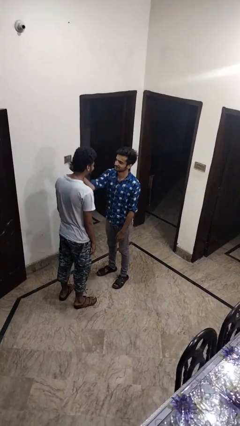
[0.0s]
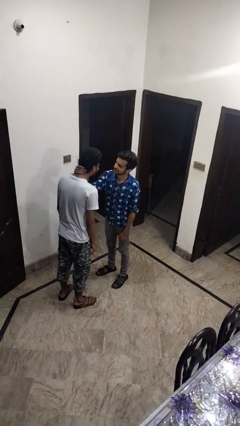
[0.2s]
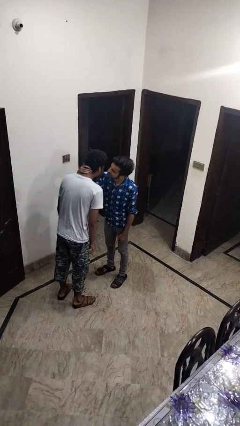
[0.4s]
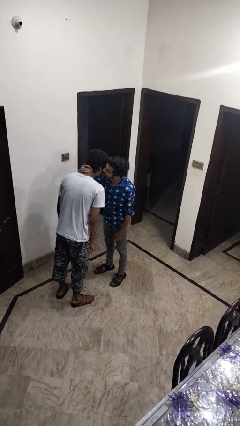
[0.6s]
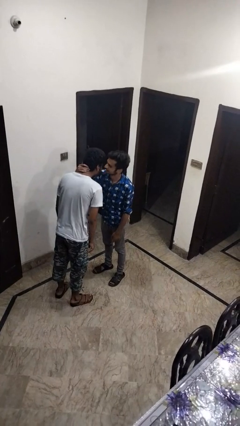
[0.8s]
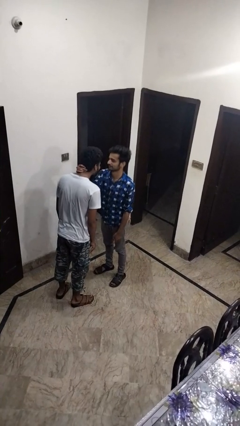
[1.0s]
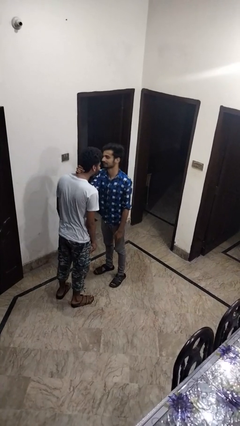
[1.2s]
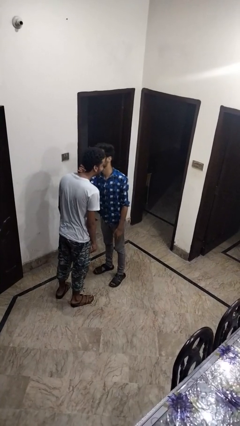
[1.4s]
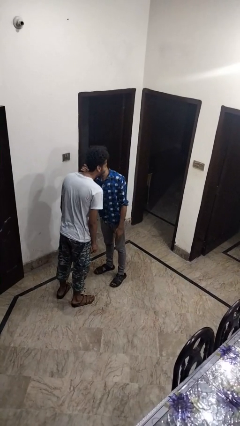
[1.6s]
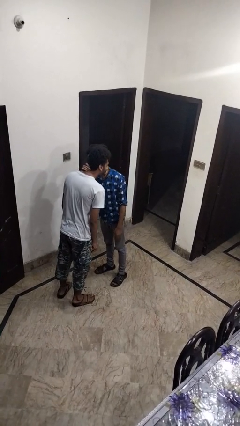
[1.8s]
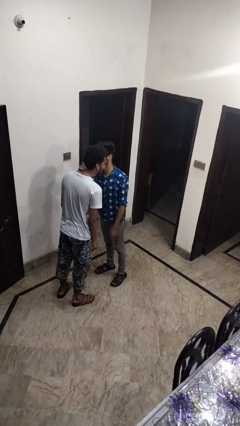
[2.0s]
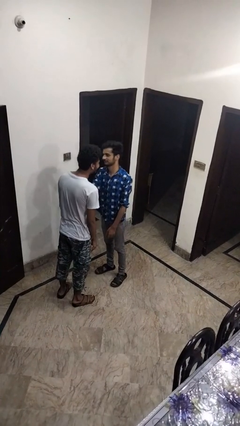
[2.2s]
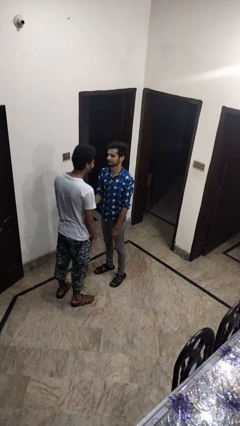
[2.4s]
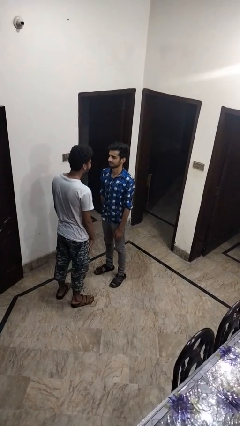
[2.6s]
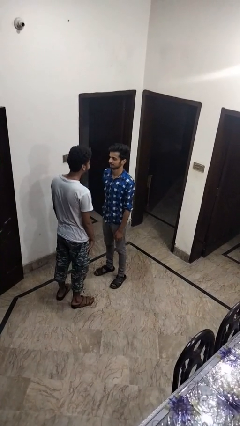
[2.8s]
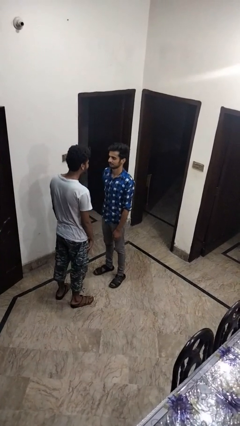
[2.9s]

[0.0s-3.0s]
person kisses cheek of person

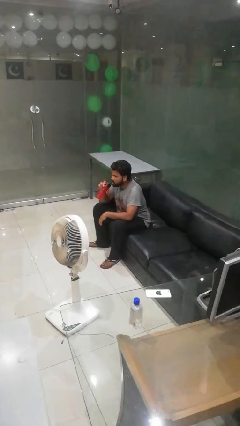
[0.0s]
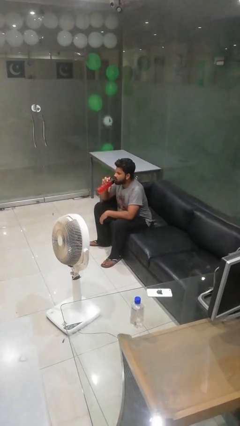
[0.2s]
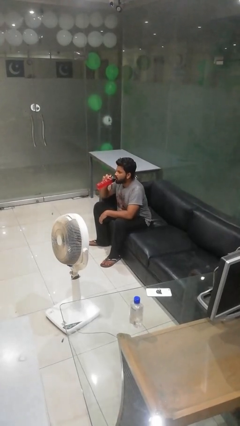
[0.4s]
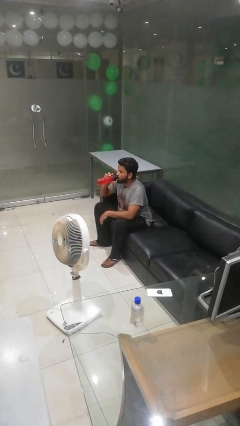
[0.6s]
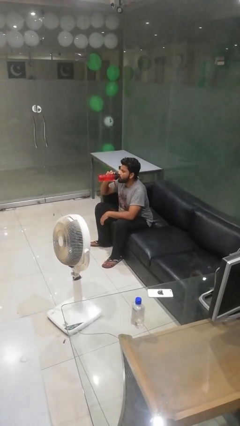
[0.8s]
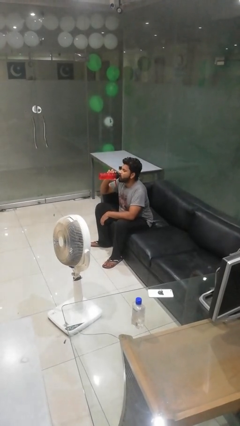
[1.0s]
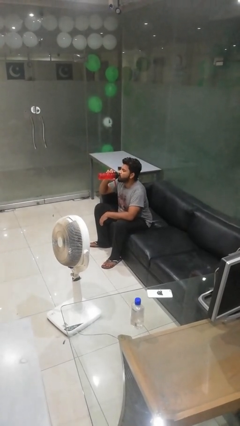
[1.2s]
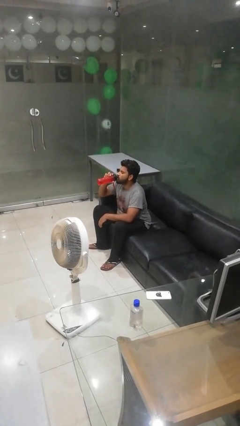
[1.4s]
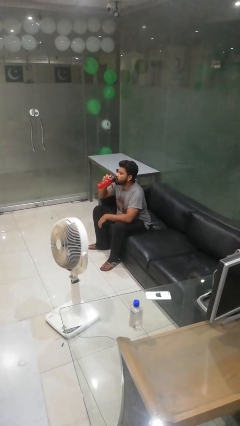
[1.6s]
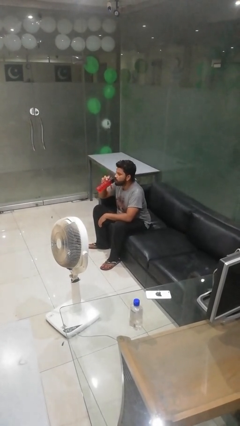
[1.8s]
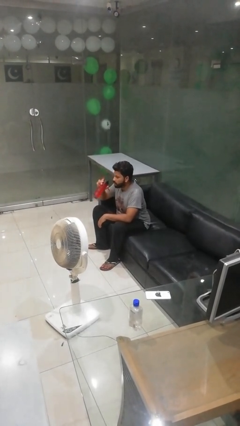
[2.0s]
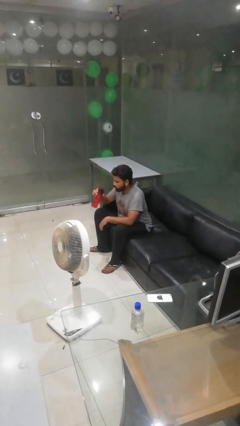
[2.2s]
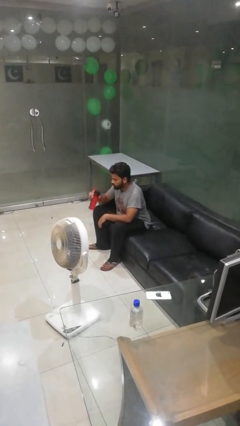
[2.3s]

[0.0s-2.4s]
person drinks from bottle

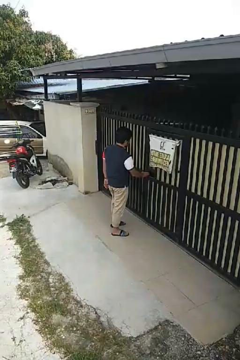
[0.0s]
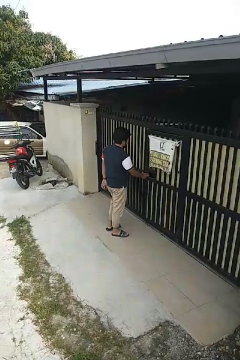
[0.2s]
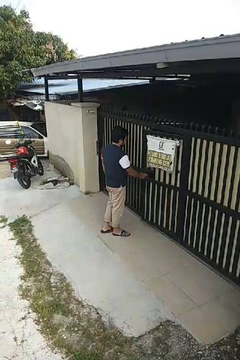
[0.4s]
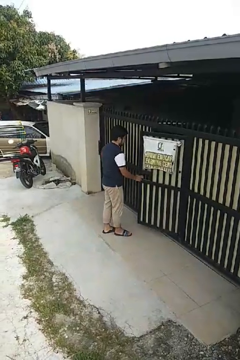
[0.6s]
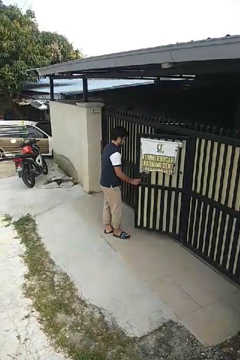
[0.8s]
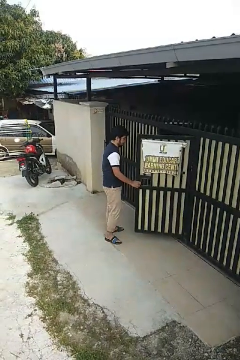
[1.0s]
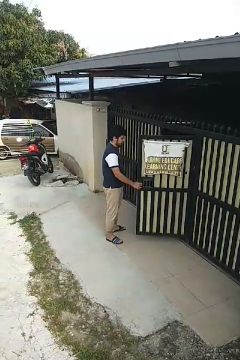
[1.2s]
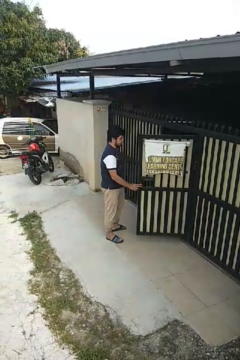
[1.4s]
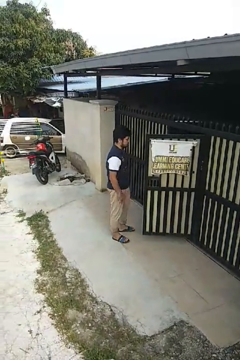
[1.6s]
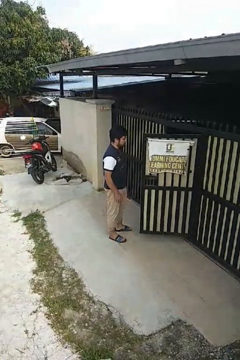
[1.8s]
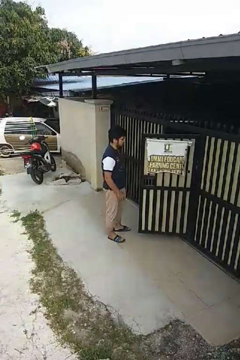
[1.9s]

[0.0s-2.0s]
person opens gate

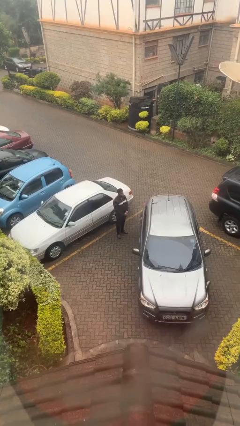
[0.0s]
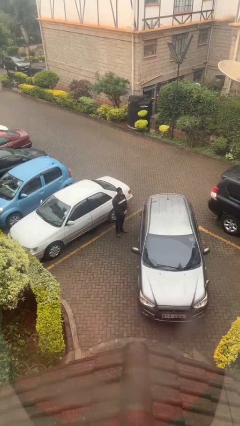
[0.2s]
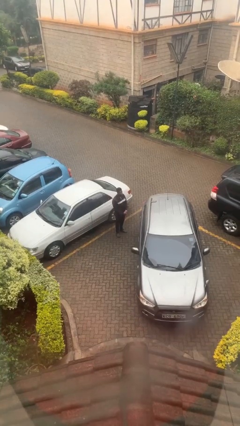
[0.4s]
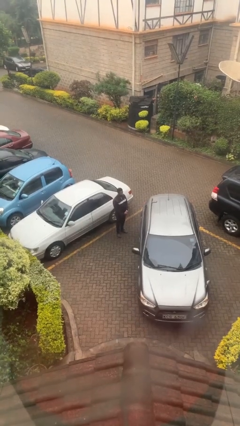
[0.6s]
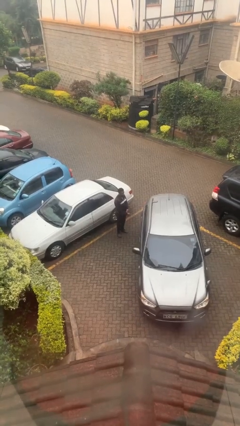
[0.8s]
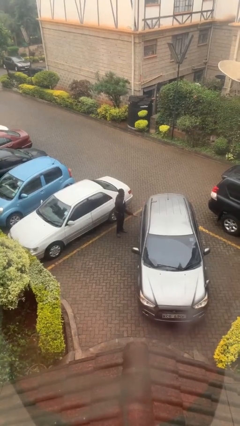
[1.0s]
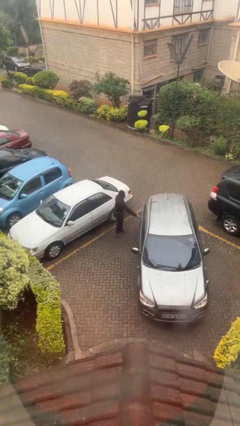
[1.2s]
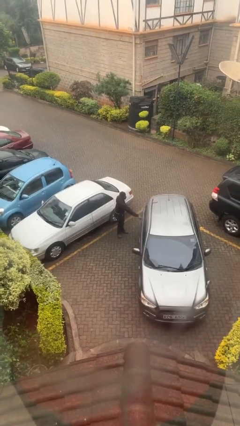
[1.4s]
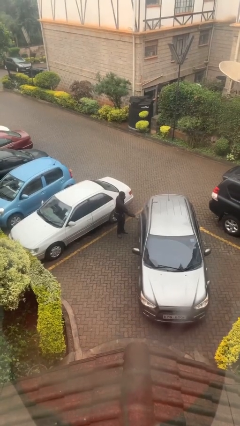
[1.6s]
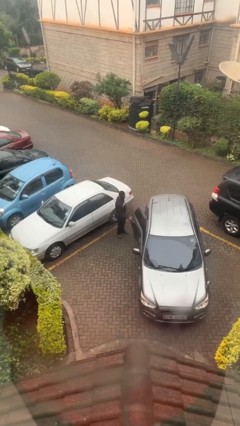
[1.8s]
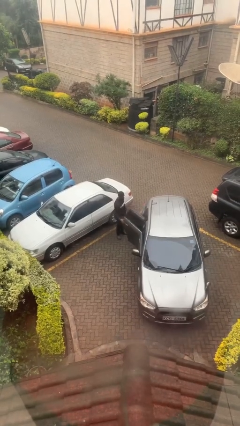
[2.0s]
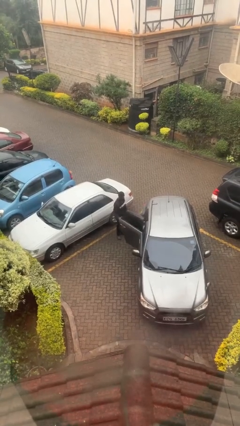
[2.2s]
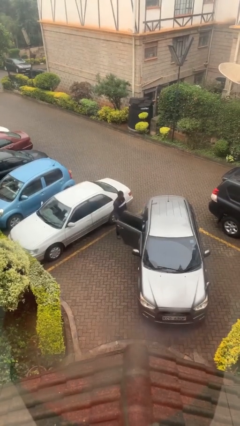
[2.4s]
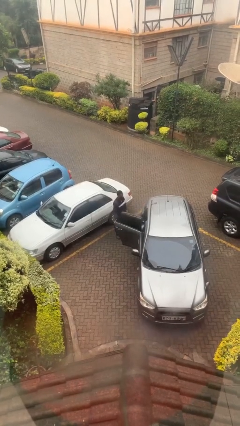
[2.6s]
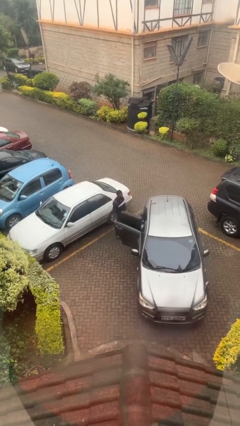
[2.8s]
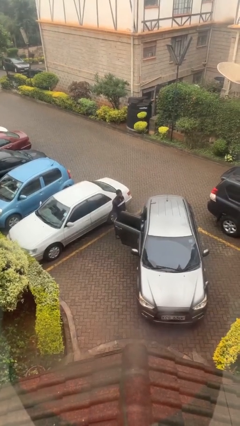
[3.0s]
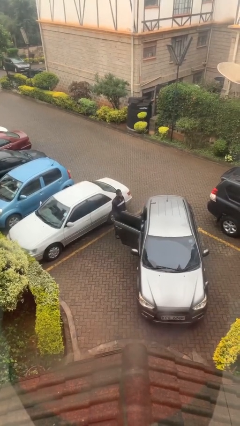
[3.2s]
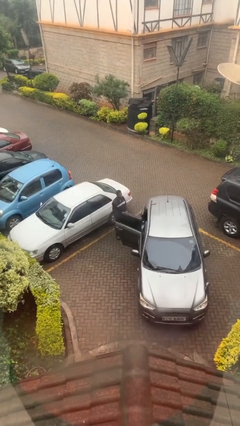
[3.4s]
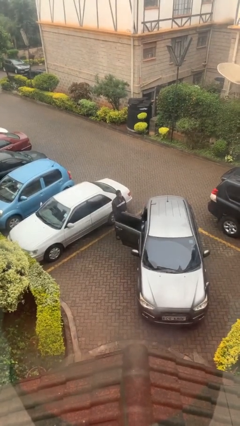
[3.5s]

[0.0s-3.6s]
person opens car door

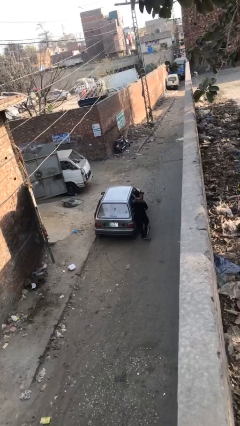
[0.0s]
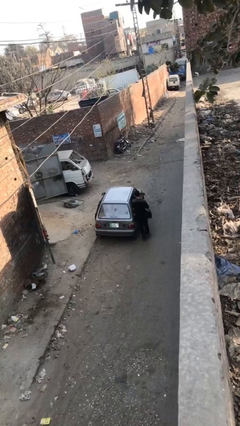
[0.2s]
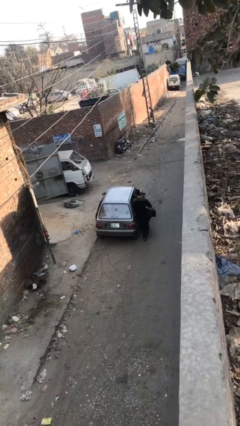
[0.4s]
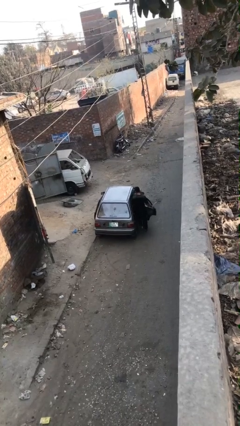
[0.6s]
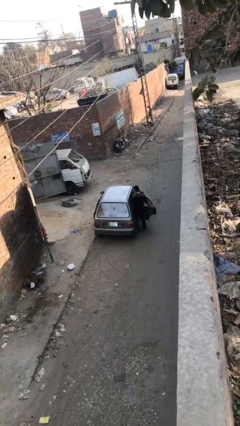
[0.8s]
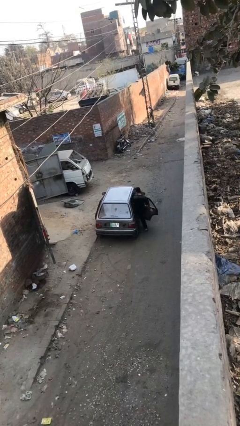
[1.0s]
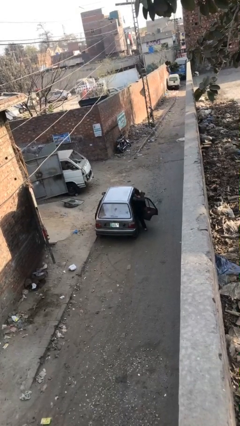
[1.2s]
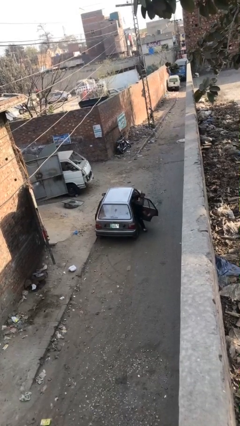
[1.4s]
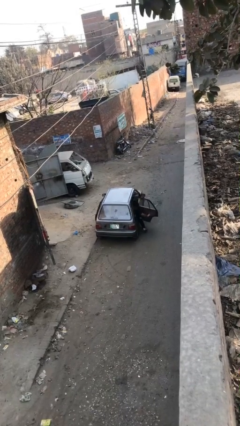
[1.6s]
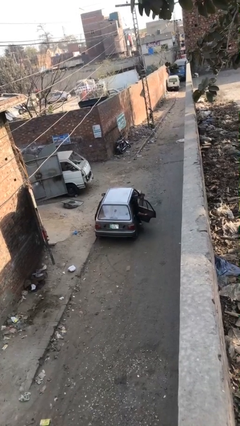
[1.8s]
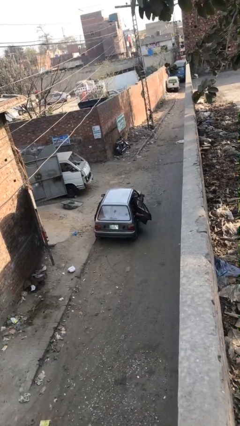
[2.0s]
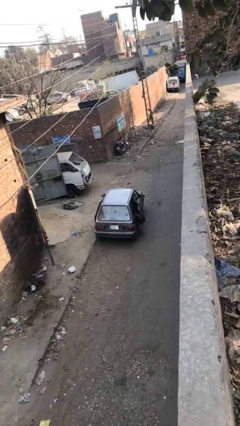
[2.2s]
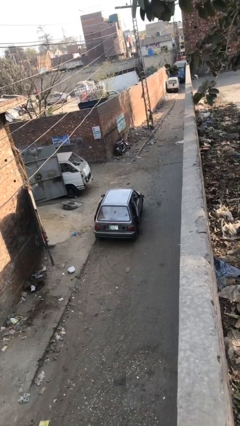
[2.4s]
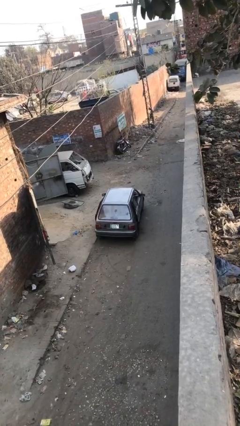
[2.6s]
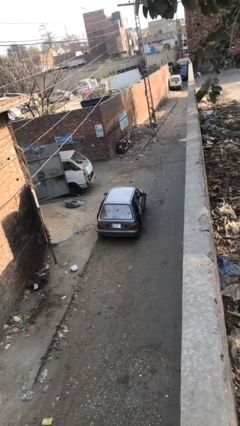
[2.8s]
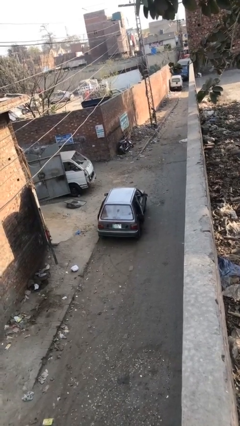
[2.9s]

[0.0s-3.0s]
car picks up person

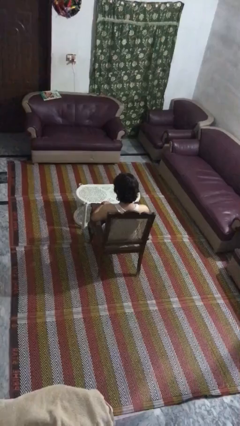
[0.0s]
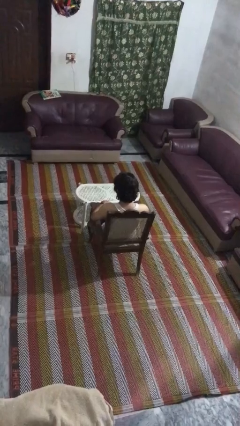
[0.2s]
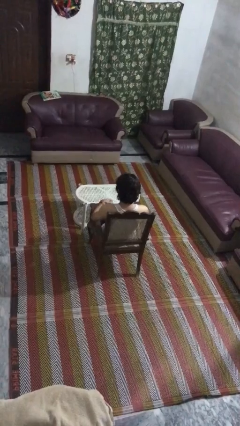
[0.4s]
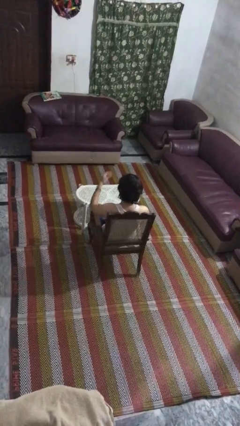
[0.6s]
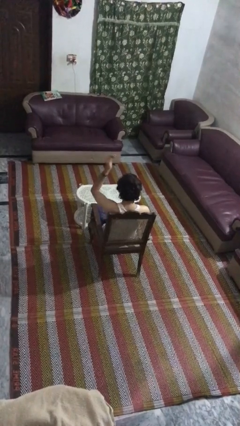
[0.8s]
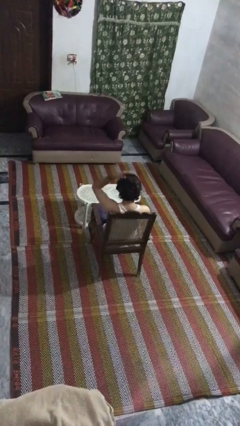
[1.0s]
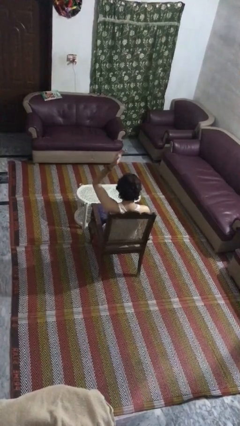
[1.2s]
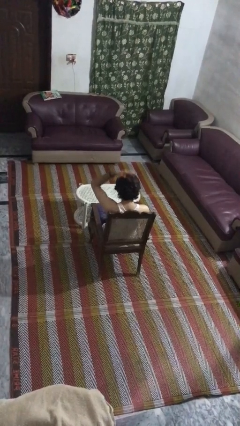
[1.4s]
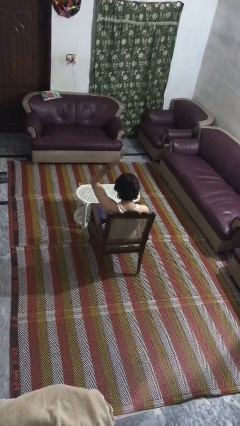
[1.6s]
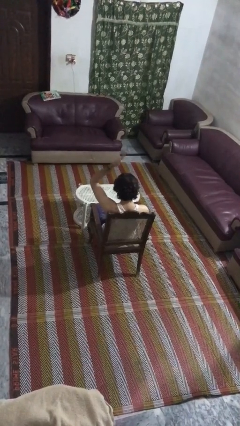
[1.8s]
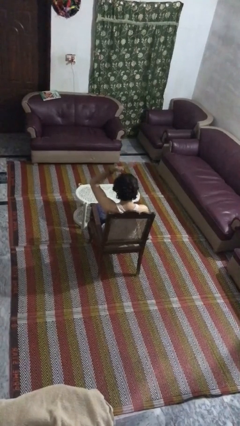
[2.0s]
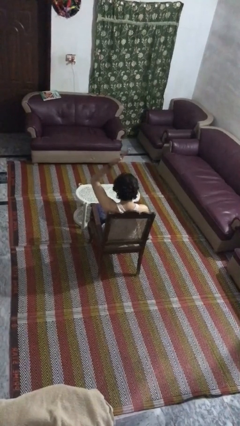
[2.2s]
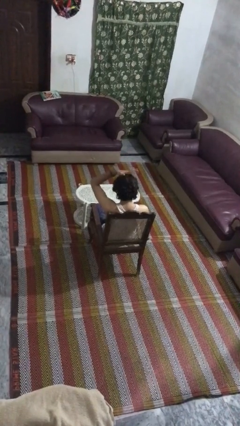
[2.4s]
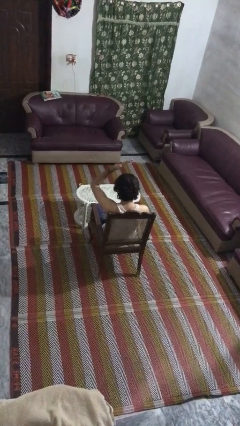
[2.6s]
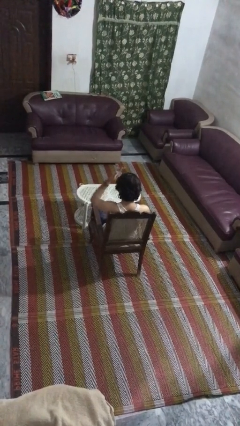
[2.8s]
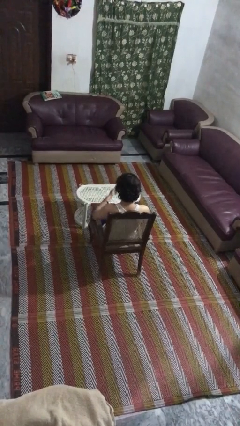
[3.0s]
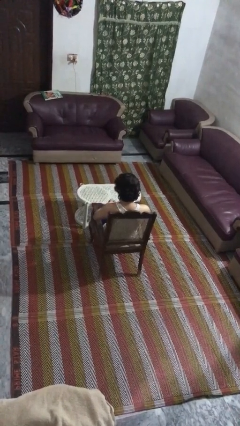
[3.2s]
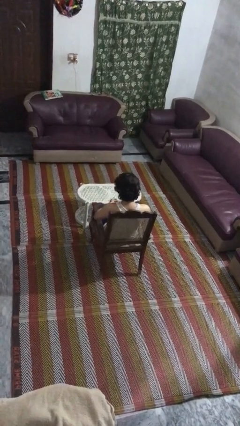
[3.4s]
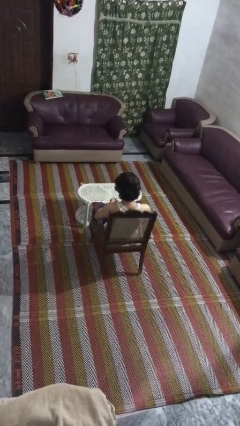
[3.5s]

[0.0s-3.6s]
person pats head

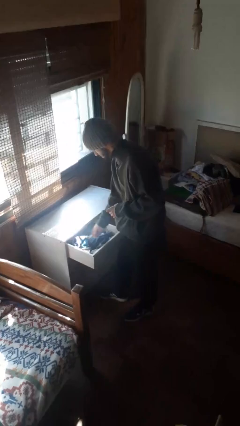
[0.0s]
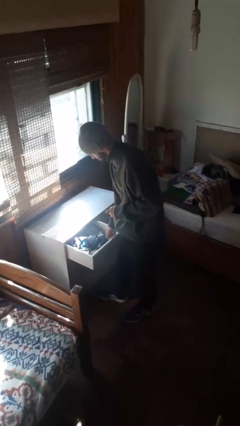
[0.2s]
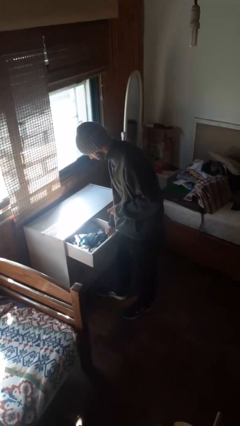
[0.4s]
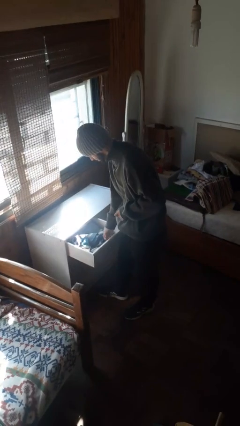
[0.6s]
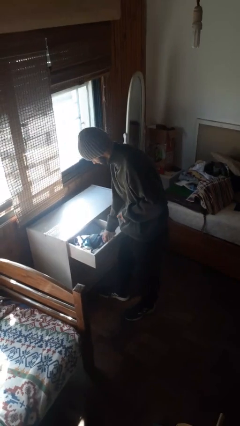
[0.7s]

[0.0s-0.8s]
person puts clothes into dresser
